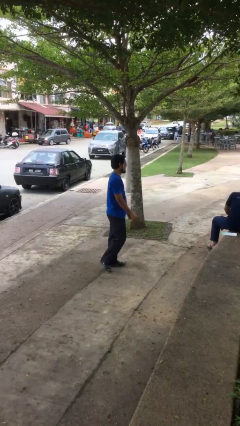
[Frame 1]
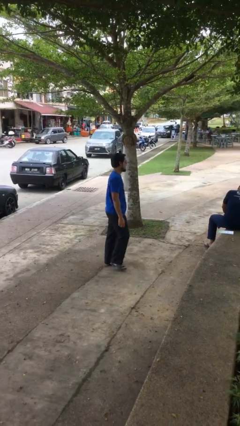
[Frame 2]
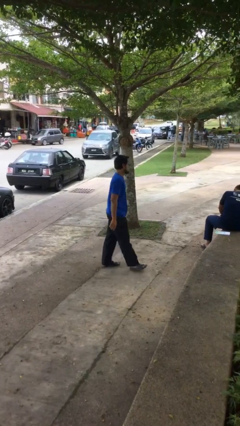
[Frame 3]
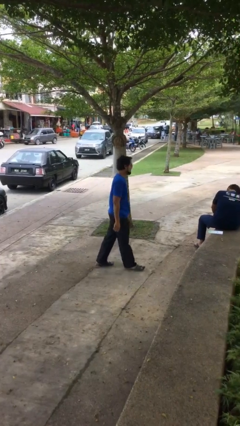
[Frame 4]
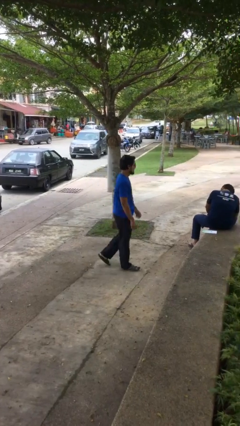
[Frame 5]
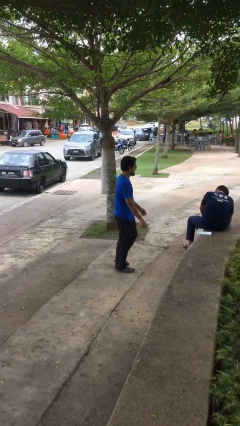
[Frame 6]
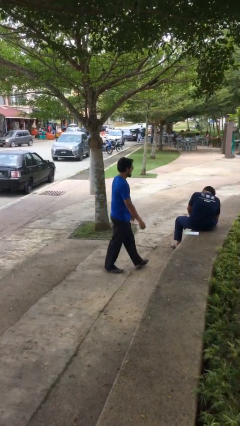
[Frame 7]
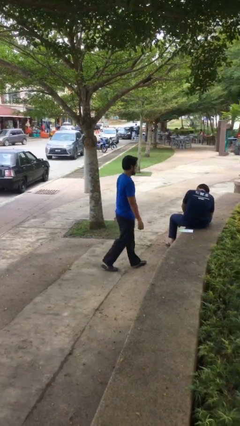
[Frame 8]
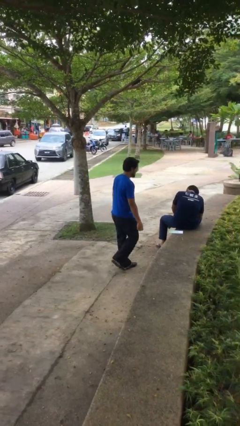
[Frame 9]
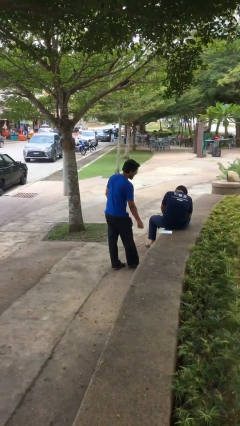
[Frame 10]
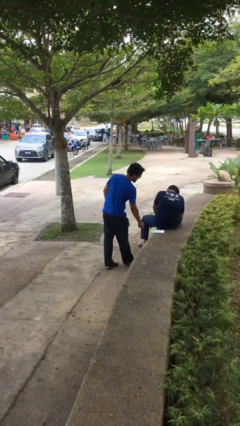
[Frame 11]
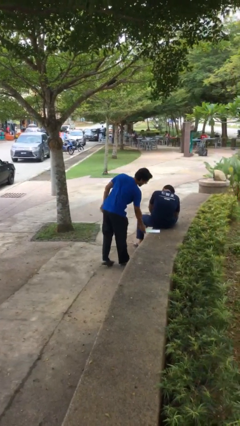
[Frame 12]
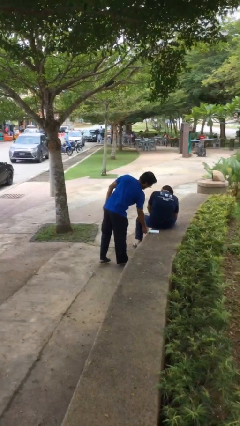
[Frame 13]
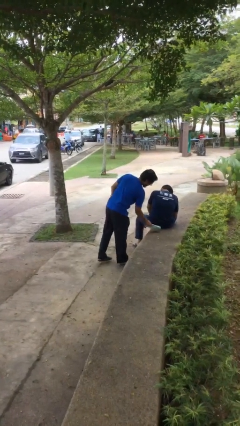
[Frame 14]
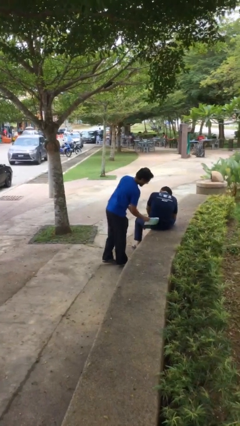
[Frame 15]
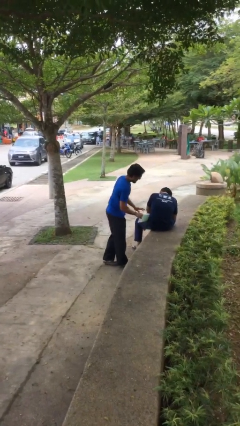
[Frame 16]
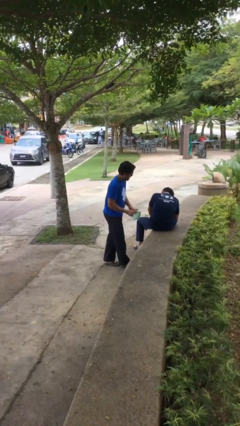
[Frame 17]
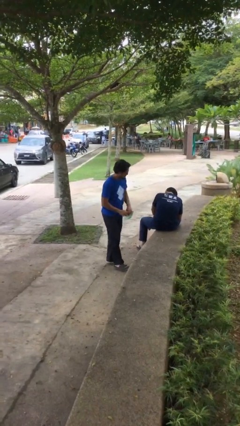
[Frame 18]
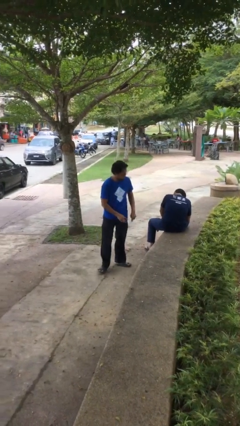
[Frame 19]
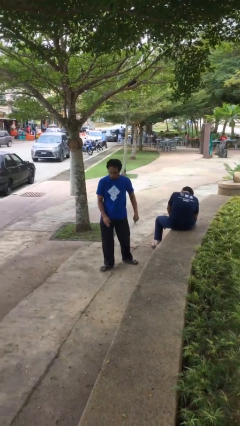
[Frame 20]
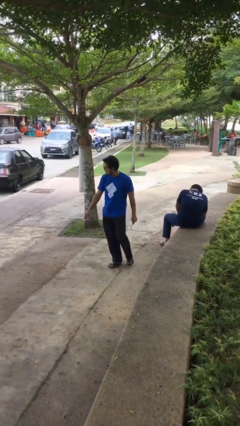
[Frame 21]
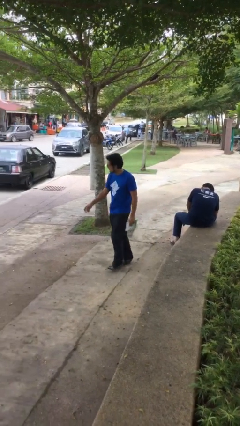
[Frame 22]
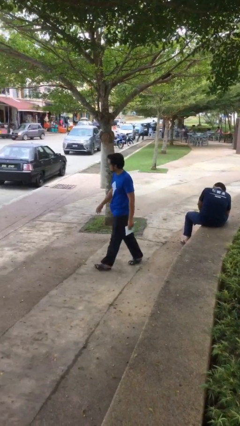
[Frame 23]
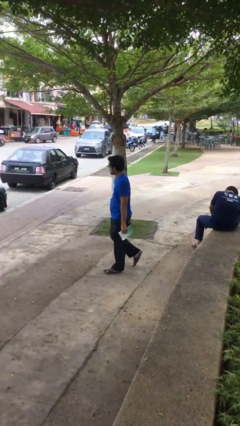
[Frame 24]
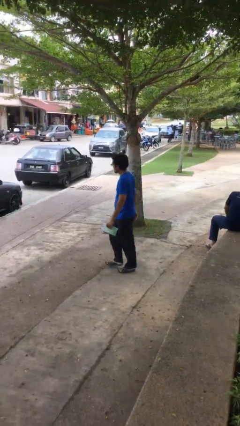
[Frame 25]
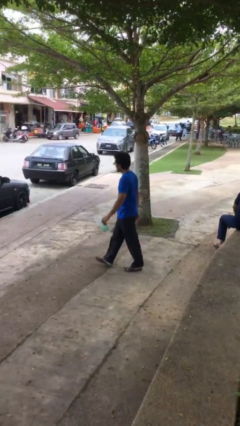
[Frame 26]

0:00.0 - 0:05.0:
person steals object from person

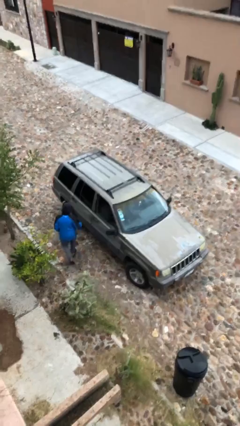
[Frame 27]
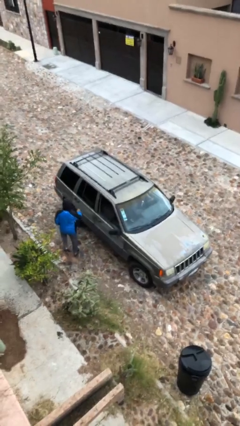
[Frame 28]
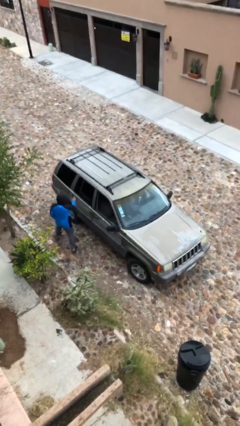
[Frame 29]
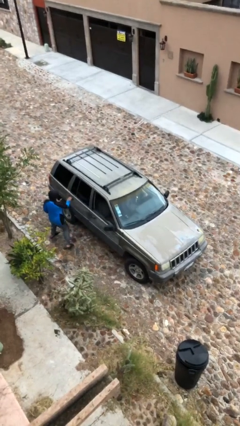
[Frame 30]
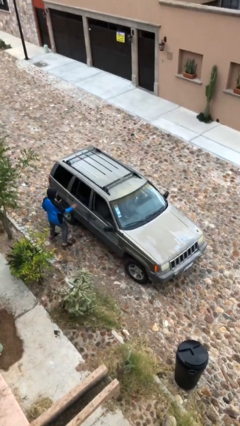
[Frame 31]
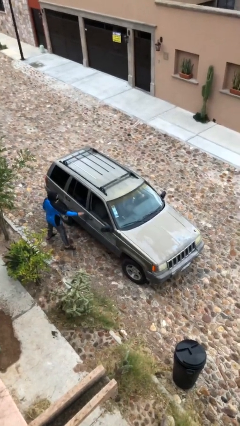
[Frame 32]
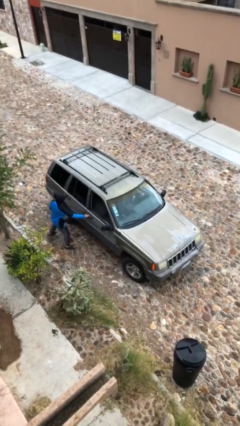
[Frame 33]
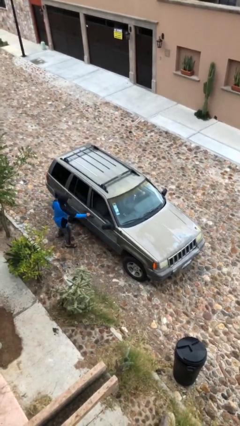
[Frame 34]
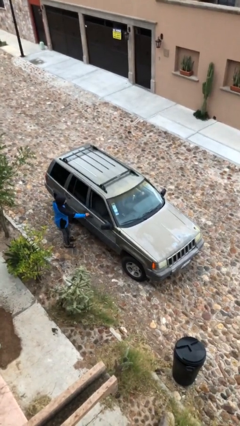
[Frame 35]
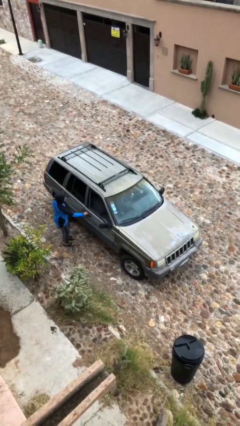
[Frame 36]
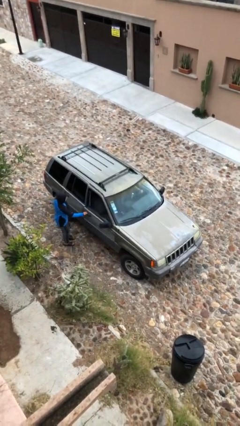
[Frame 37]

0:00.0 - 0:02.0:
car picks up person

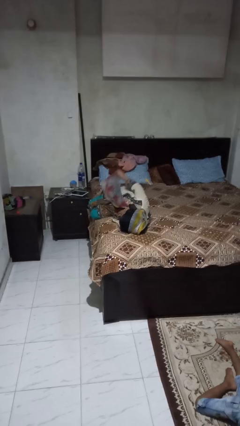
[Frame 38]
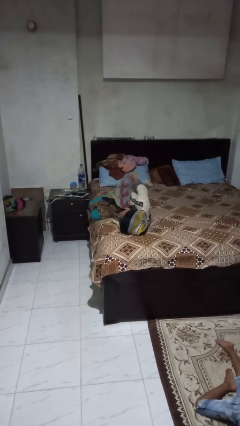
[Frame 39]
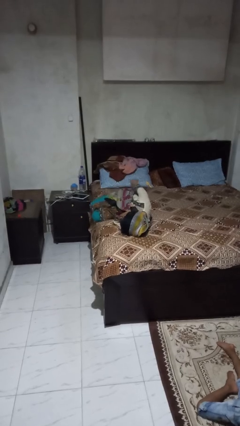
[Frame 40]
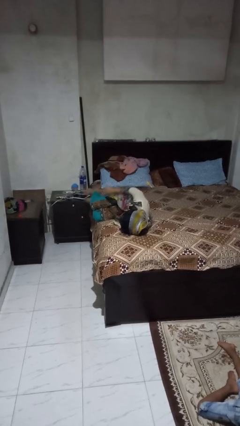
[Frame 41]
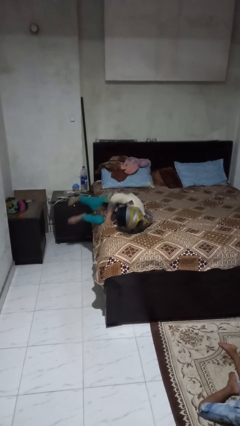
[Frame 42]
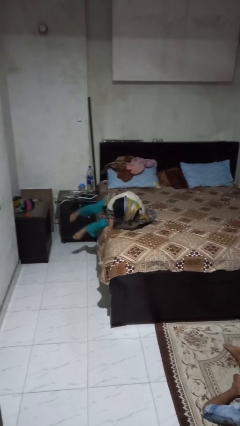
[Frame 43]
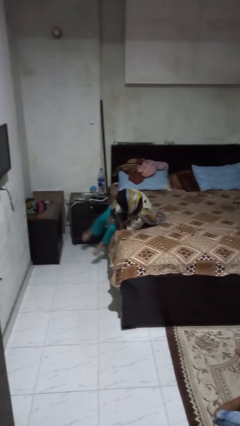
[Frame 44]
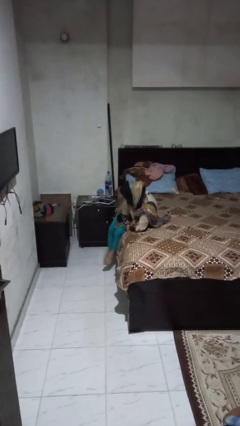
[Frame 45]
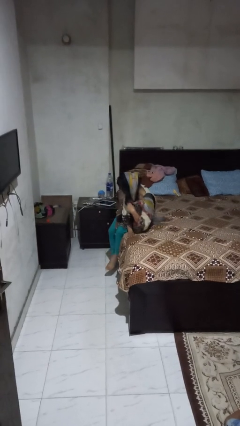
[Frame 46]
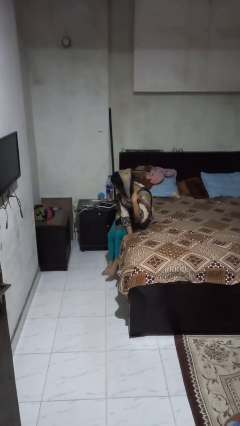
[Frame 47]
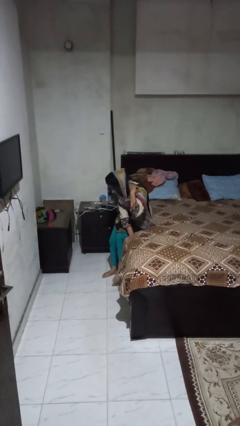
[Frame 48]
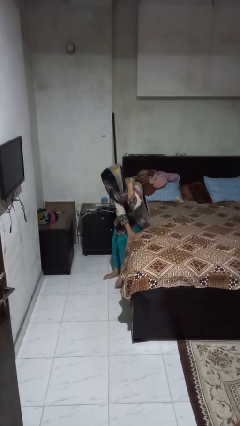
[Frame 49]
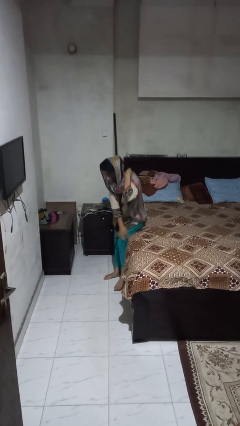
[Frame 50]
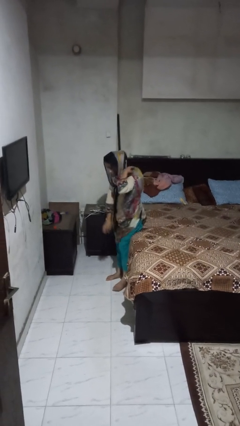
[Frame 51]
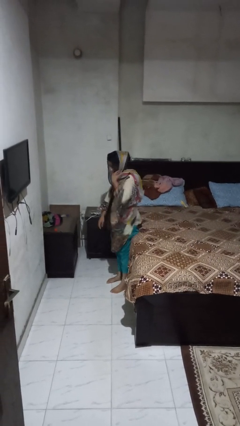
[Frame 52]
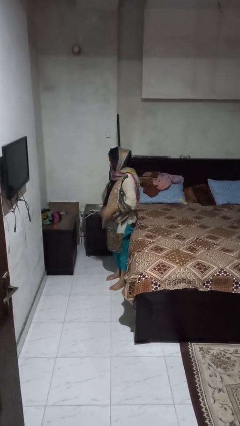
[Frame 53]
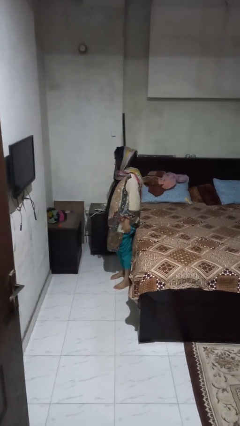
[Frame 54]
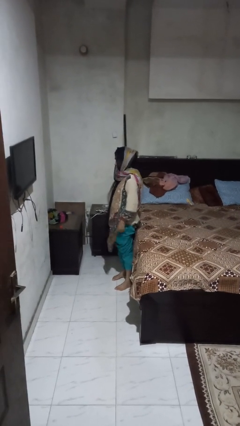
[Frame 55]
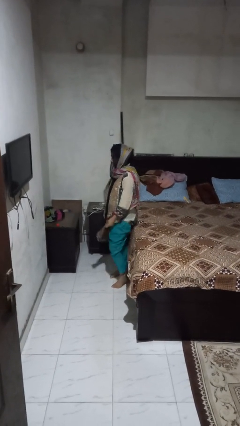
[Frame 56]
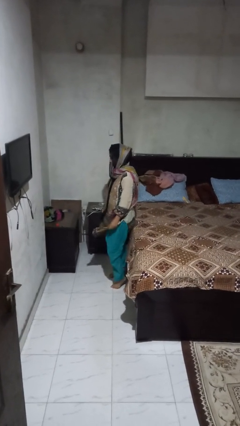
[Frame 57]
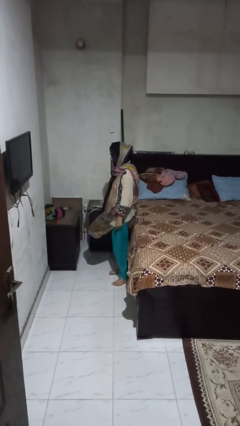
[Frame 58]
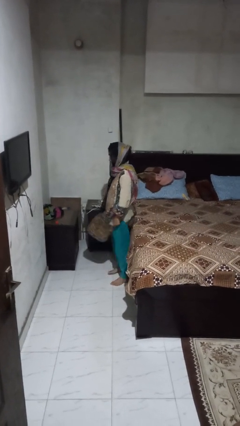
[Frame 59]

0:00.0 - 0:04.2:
person stands up

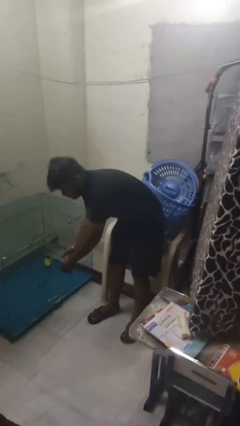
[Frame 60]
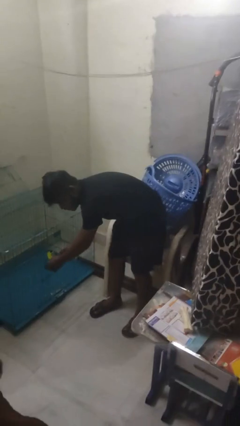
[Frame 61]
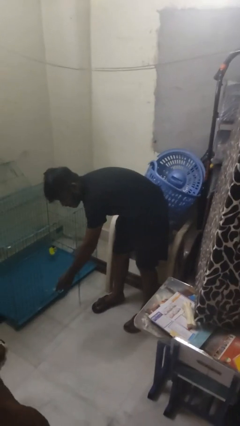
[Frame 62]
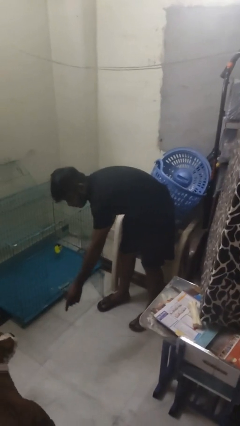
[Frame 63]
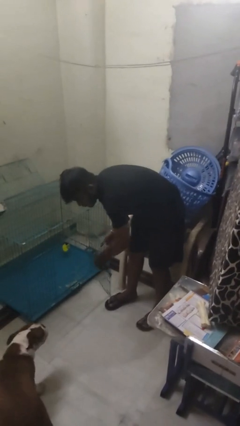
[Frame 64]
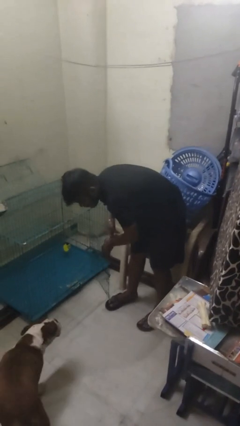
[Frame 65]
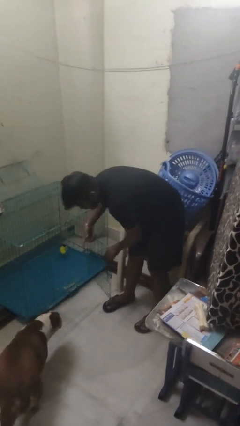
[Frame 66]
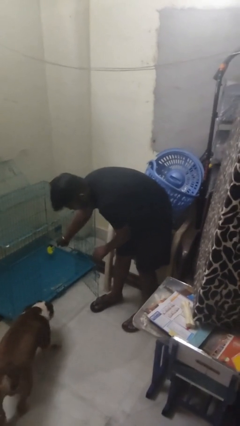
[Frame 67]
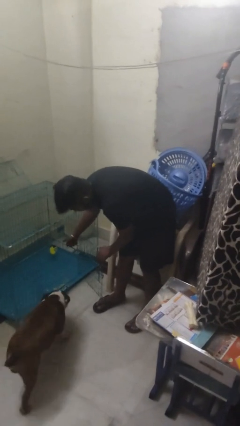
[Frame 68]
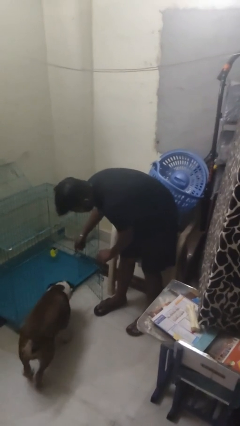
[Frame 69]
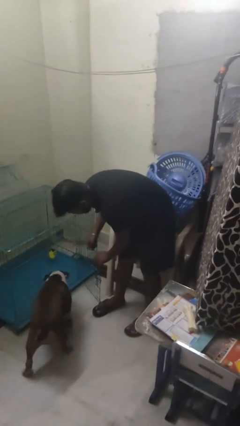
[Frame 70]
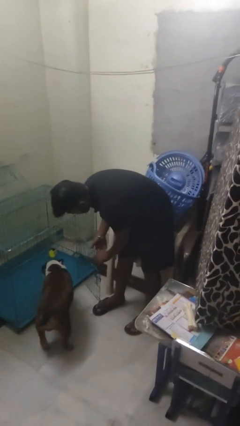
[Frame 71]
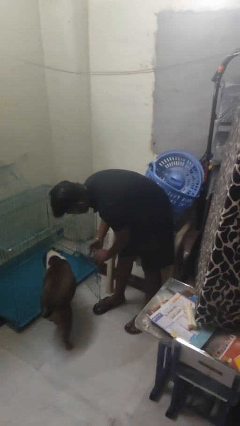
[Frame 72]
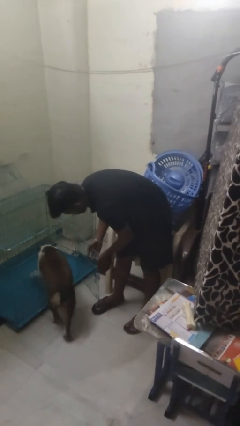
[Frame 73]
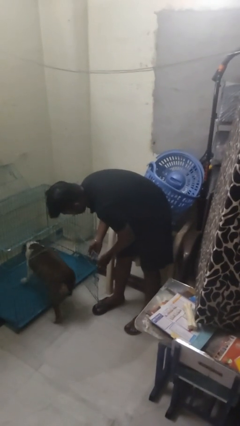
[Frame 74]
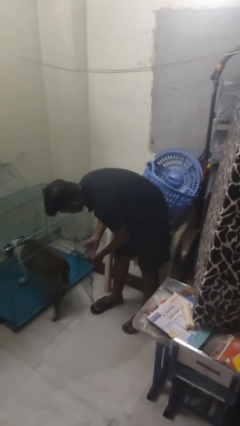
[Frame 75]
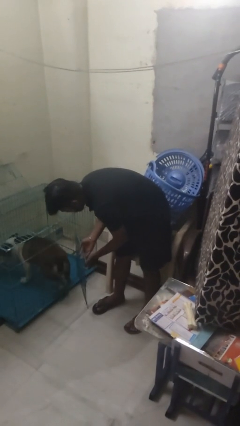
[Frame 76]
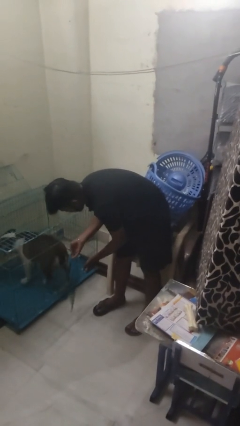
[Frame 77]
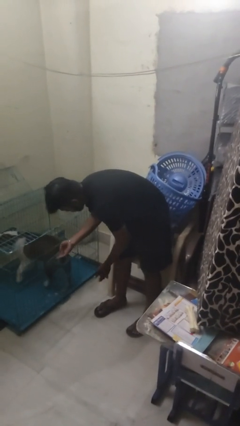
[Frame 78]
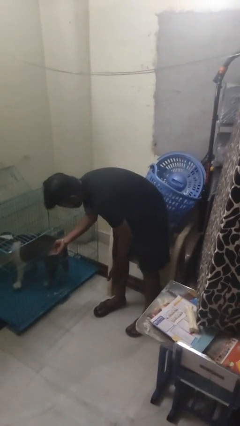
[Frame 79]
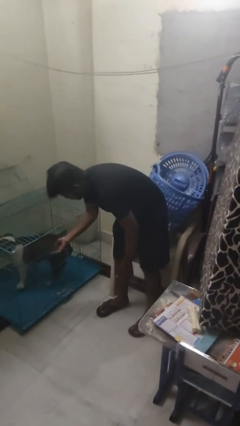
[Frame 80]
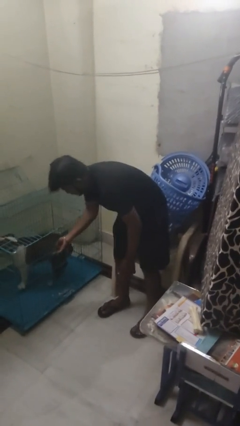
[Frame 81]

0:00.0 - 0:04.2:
person crates dog

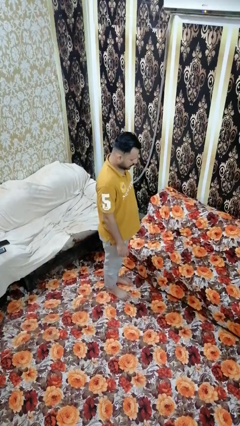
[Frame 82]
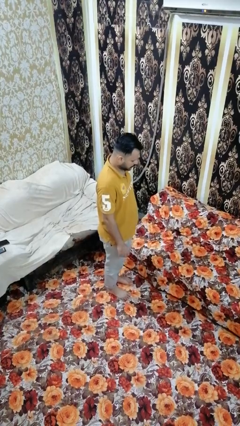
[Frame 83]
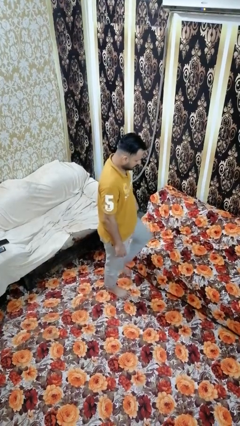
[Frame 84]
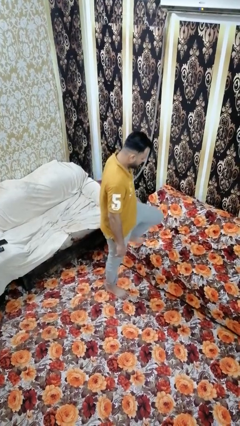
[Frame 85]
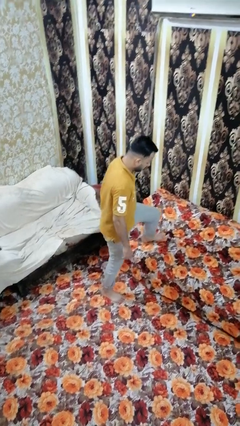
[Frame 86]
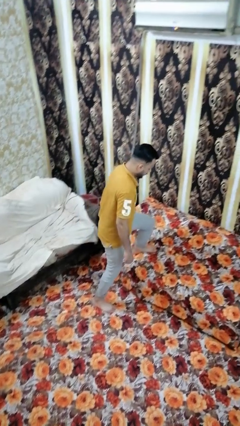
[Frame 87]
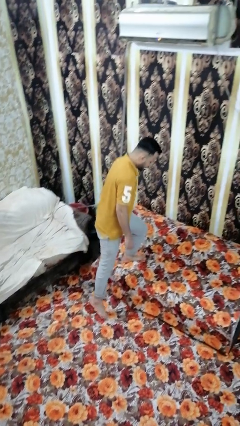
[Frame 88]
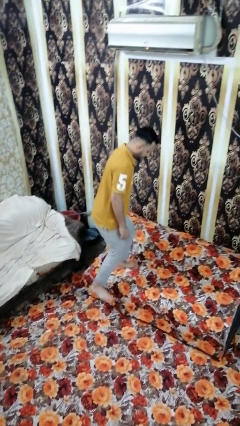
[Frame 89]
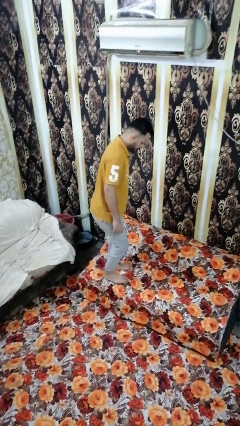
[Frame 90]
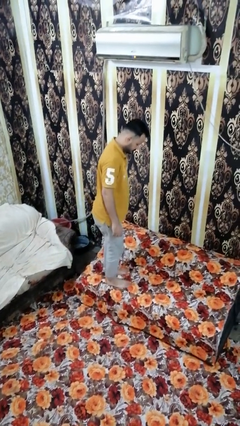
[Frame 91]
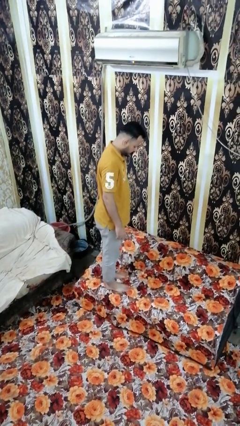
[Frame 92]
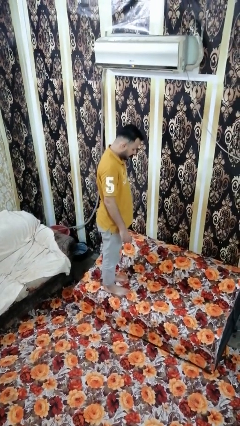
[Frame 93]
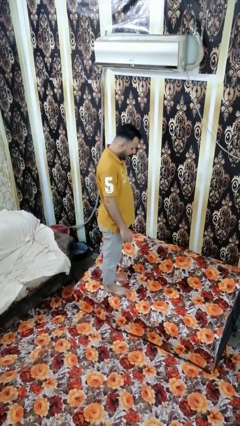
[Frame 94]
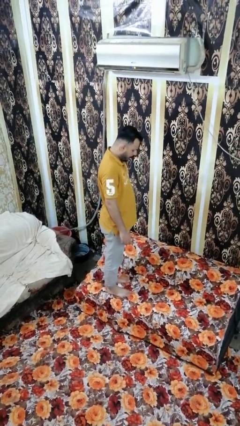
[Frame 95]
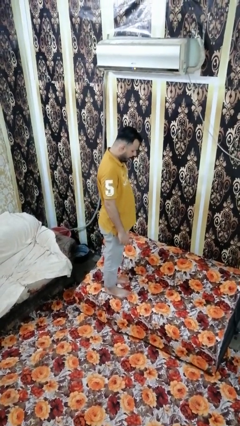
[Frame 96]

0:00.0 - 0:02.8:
person climbs on couch
